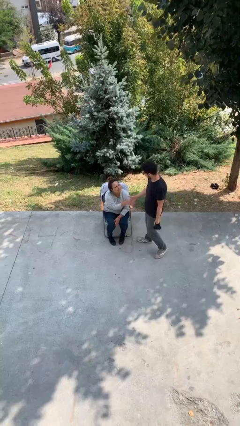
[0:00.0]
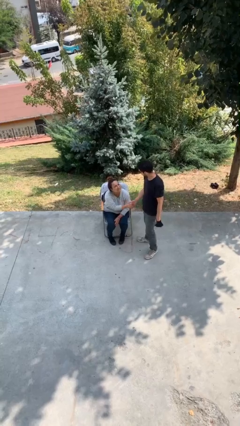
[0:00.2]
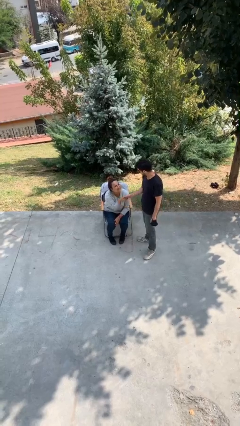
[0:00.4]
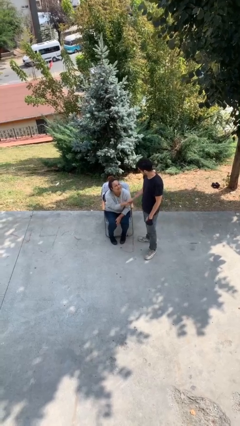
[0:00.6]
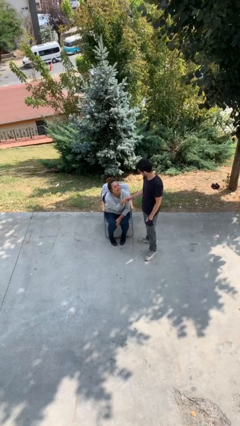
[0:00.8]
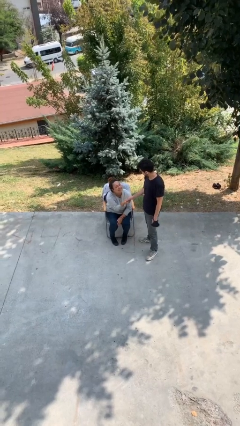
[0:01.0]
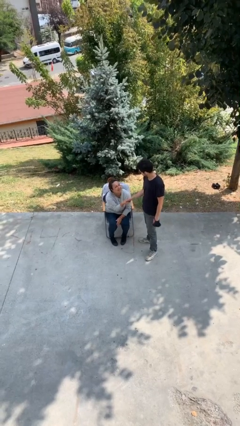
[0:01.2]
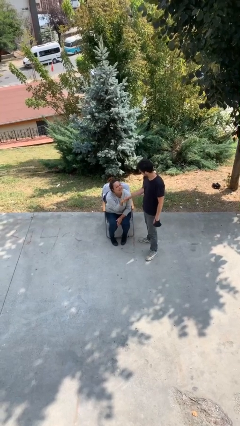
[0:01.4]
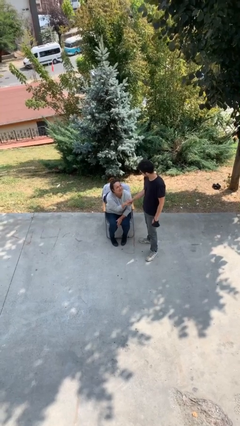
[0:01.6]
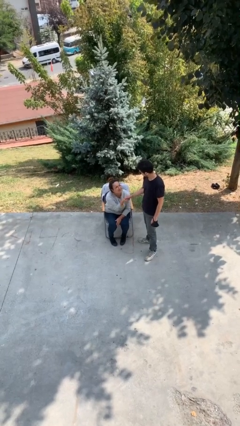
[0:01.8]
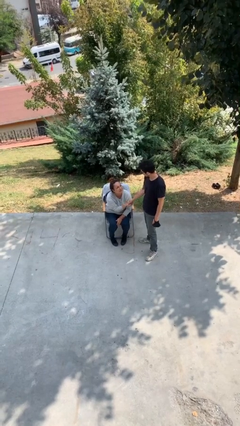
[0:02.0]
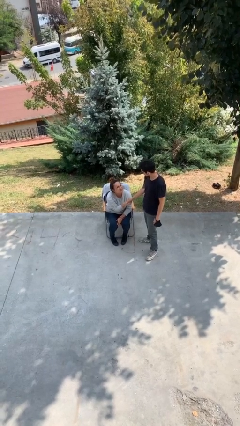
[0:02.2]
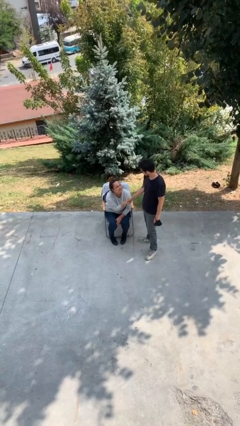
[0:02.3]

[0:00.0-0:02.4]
person shakes hand

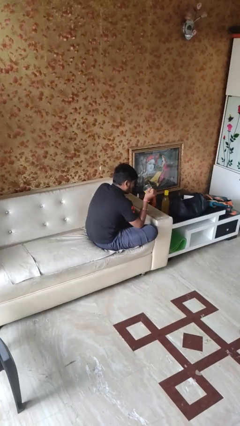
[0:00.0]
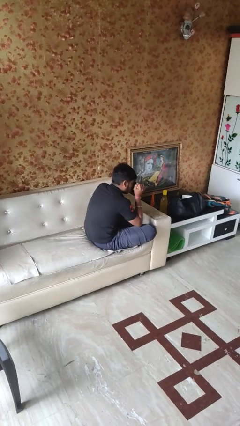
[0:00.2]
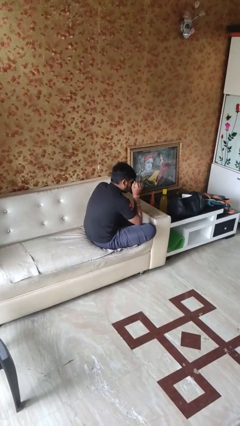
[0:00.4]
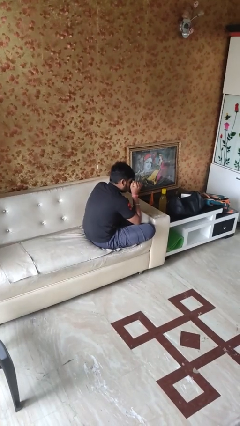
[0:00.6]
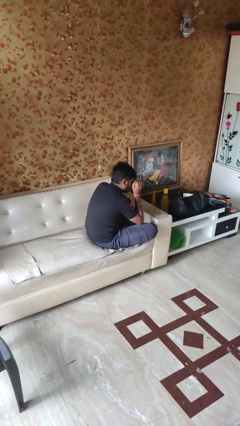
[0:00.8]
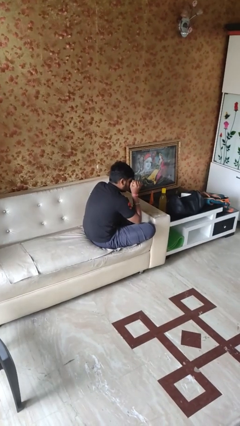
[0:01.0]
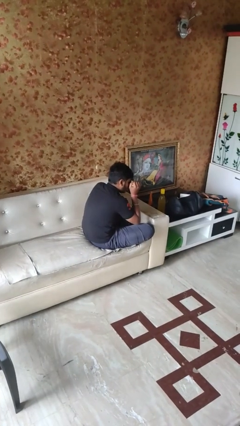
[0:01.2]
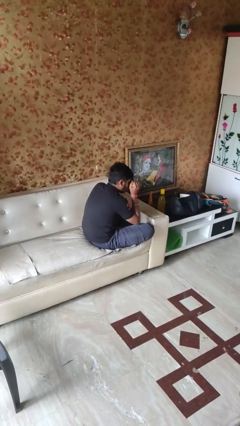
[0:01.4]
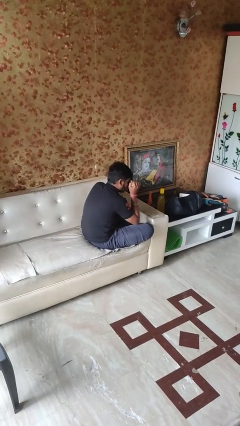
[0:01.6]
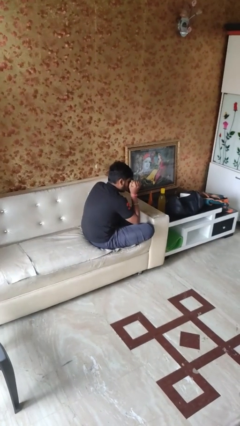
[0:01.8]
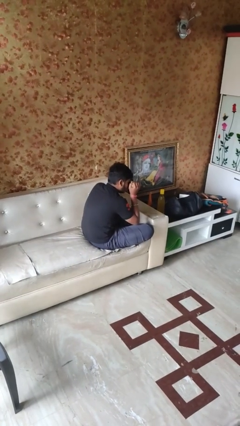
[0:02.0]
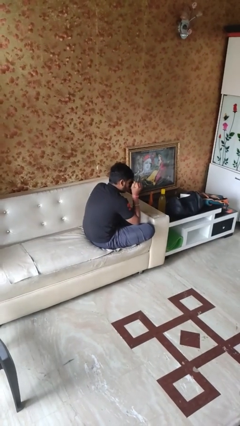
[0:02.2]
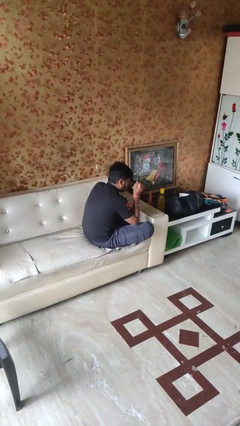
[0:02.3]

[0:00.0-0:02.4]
person drinks from mug

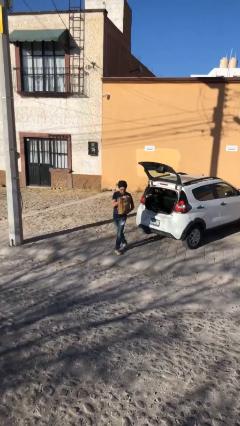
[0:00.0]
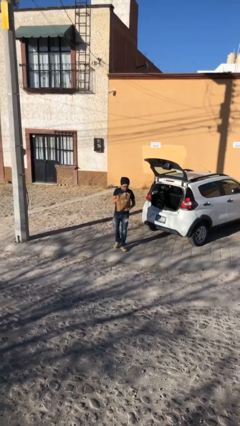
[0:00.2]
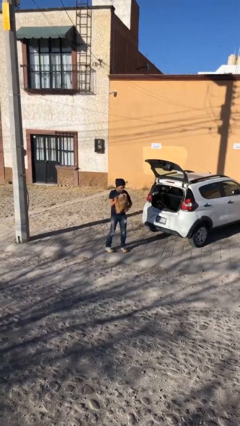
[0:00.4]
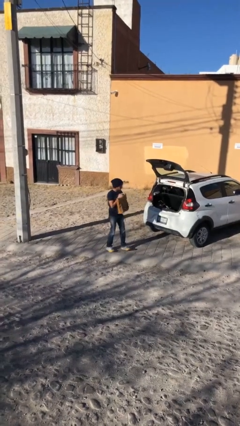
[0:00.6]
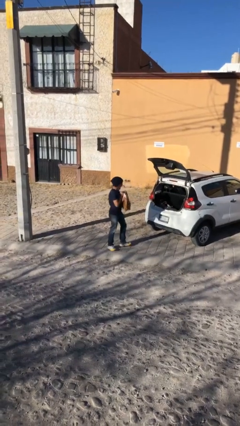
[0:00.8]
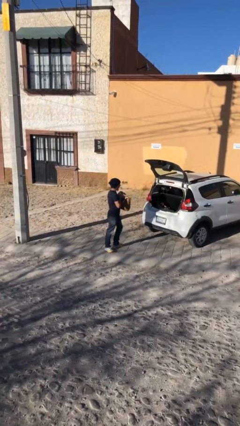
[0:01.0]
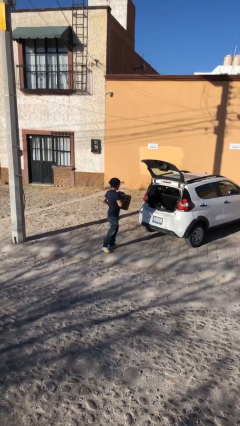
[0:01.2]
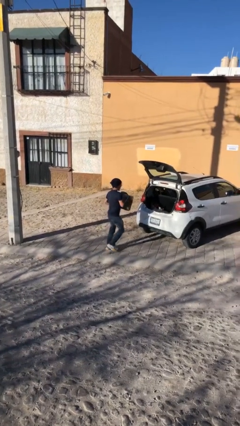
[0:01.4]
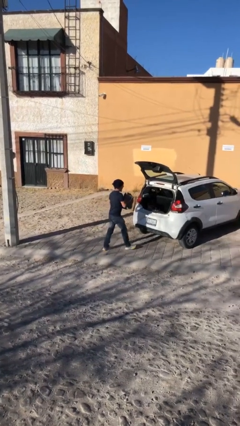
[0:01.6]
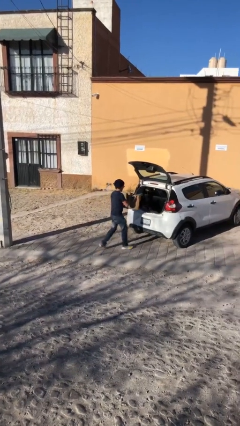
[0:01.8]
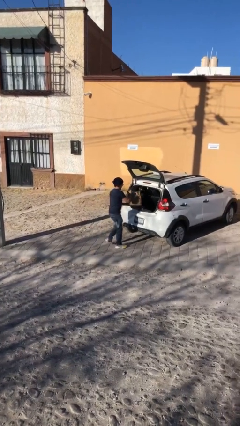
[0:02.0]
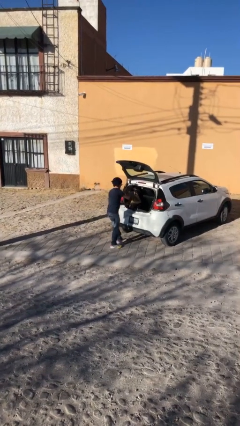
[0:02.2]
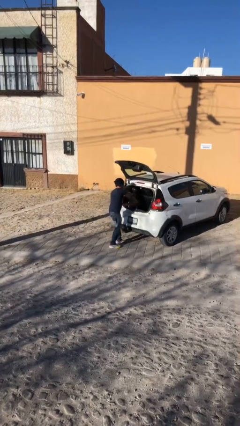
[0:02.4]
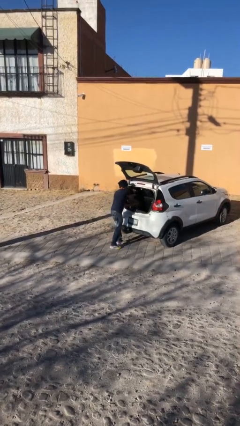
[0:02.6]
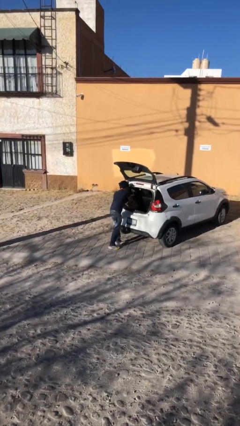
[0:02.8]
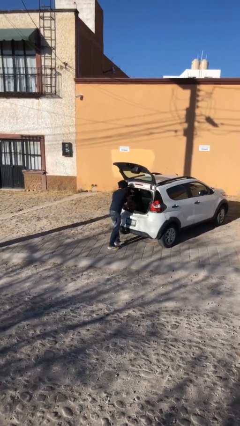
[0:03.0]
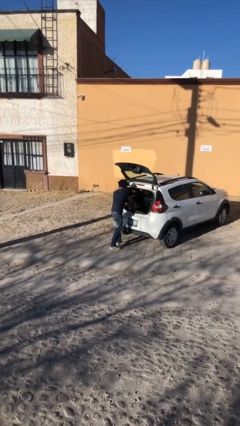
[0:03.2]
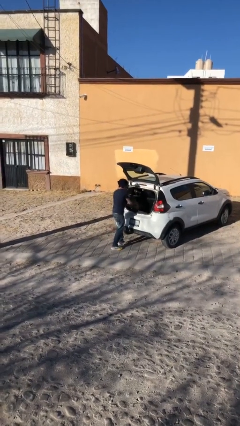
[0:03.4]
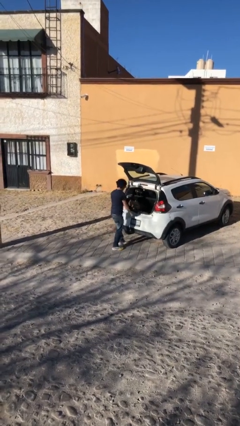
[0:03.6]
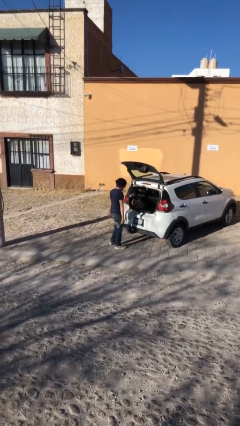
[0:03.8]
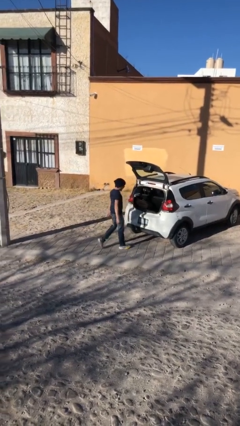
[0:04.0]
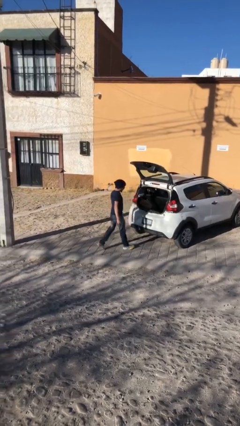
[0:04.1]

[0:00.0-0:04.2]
person loads car

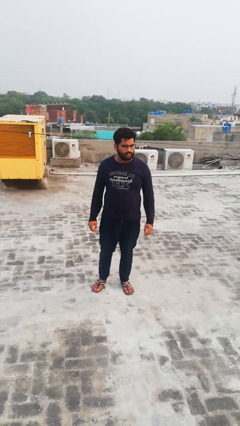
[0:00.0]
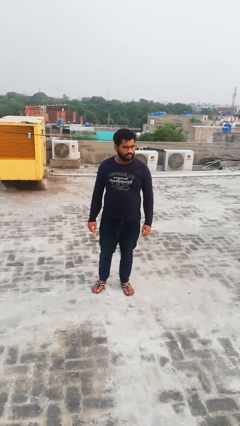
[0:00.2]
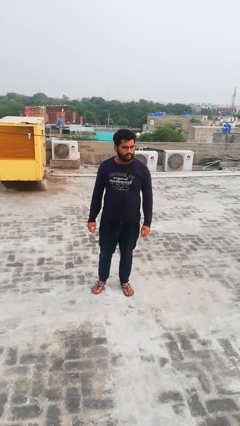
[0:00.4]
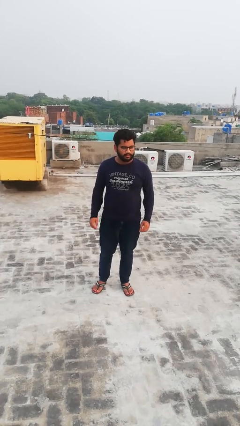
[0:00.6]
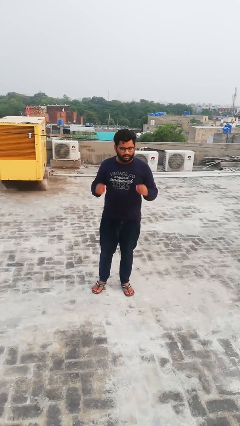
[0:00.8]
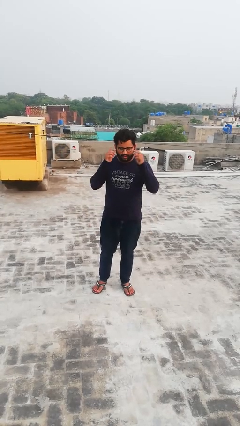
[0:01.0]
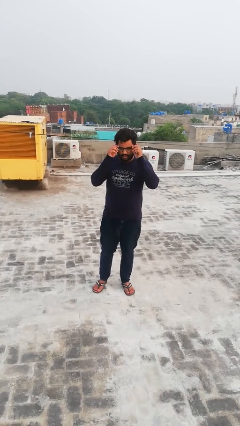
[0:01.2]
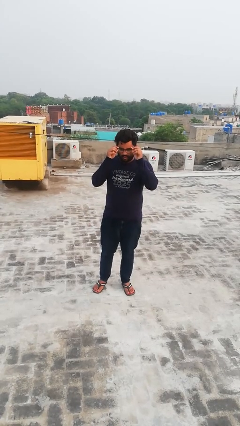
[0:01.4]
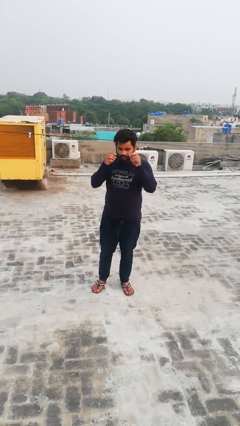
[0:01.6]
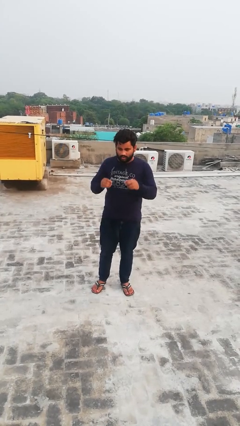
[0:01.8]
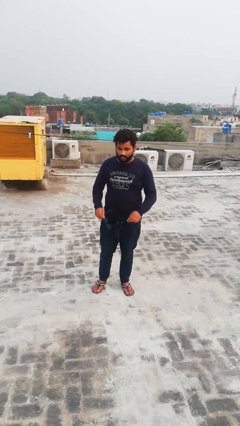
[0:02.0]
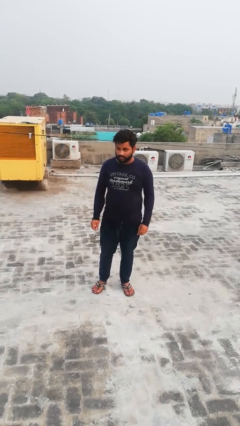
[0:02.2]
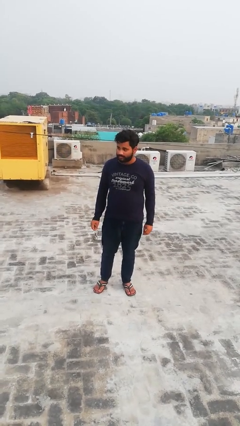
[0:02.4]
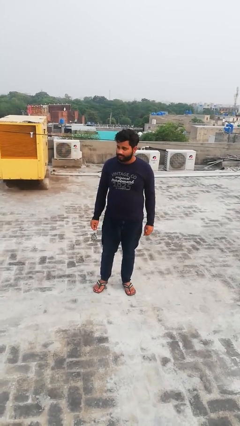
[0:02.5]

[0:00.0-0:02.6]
person takes off glasses

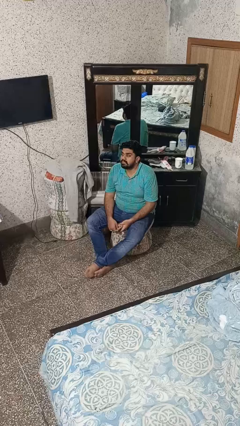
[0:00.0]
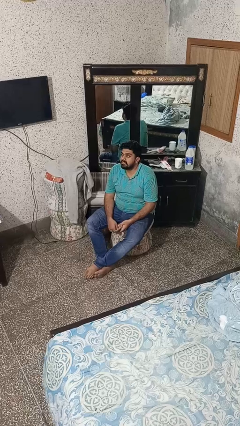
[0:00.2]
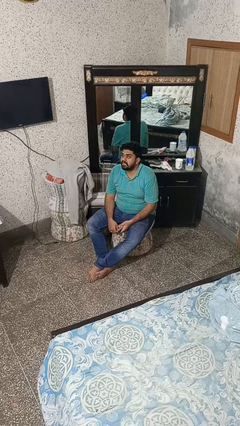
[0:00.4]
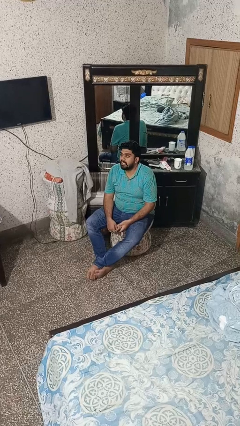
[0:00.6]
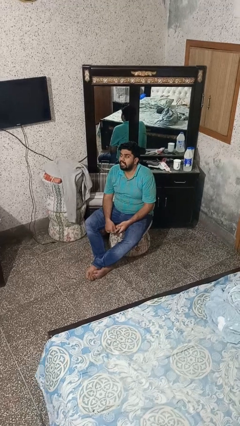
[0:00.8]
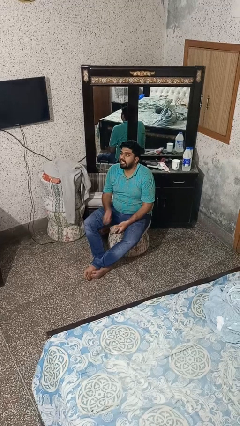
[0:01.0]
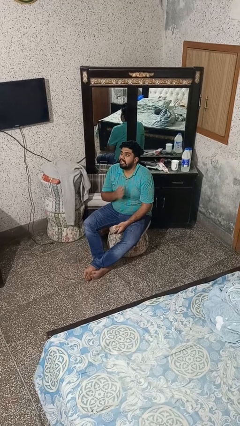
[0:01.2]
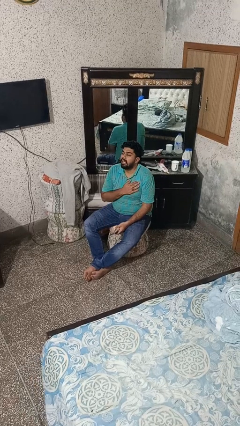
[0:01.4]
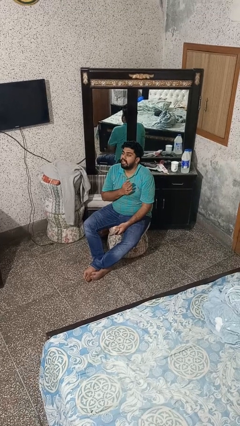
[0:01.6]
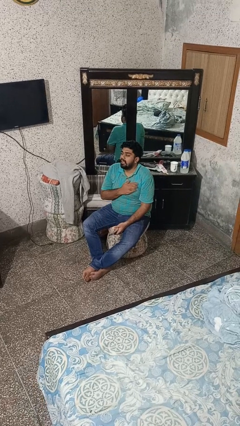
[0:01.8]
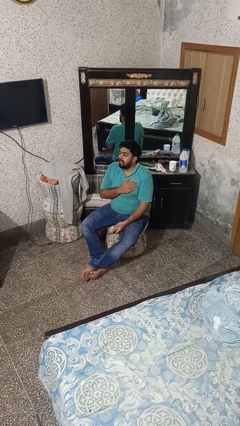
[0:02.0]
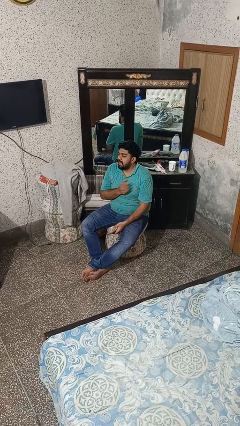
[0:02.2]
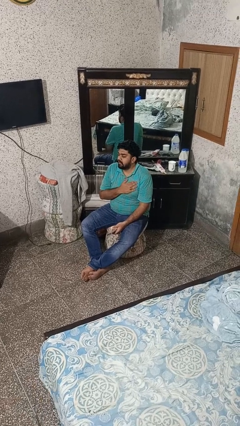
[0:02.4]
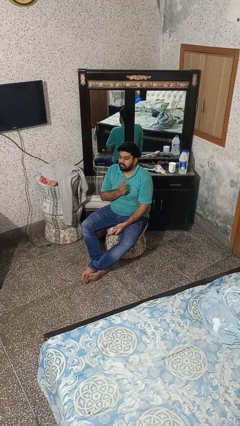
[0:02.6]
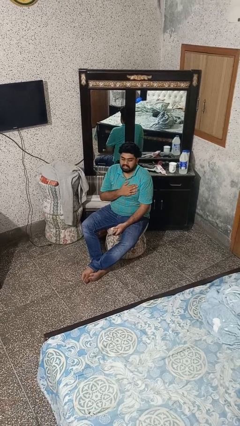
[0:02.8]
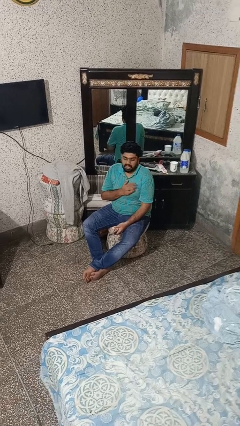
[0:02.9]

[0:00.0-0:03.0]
person drums on chest

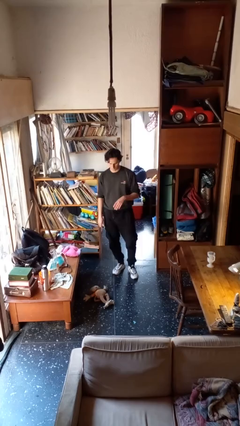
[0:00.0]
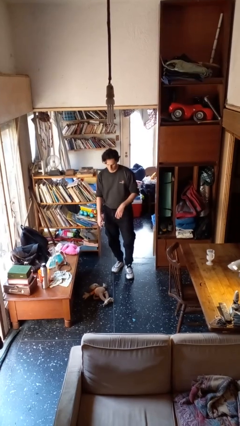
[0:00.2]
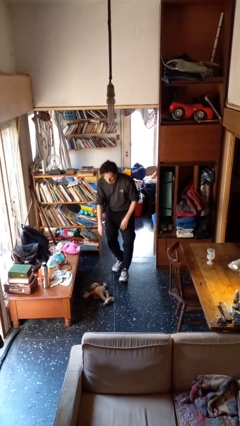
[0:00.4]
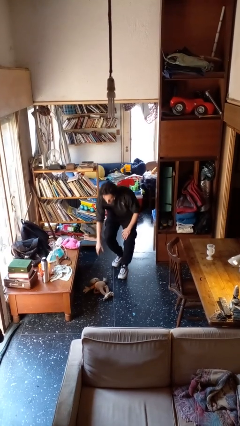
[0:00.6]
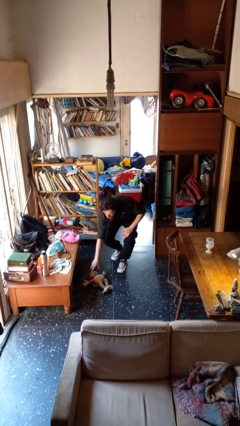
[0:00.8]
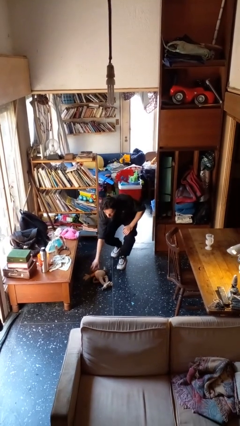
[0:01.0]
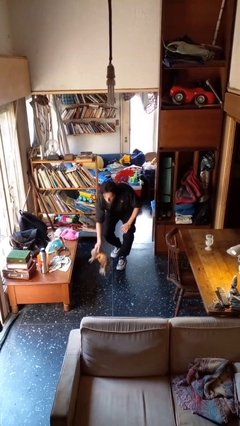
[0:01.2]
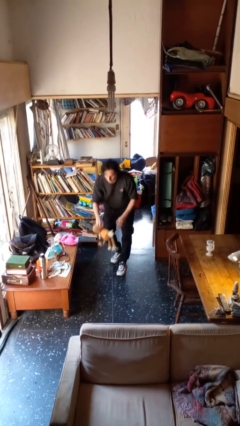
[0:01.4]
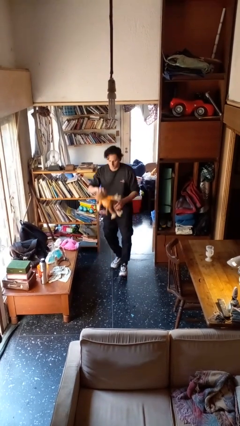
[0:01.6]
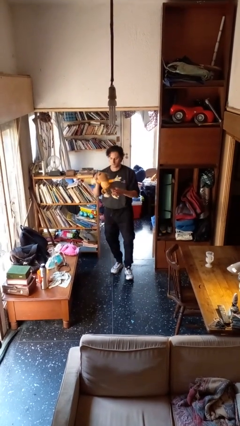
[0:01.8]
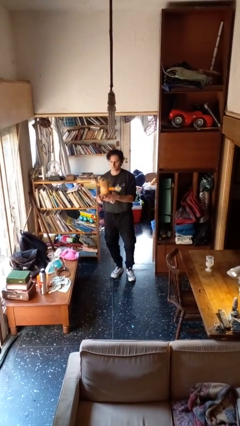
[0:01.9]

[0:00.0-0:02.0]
person picks up object from floor

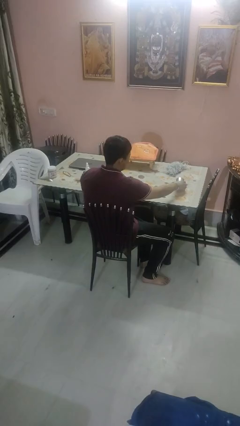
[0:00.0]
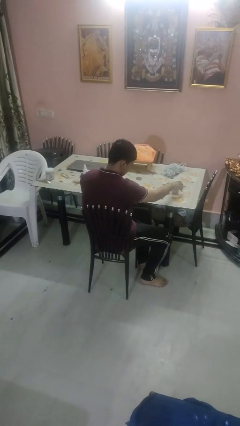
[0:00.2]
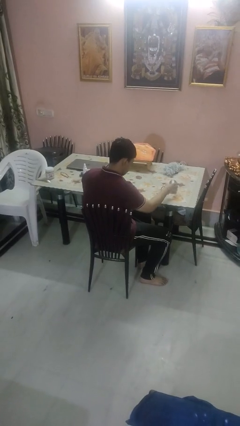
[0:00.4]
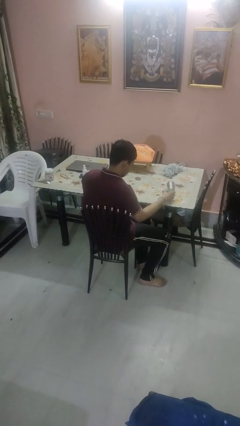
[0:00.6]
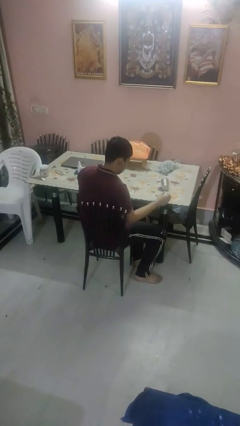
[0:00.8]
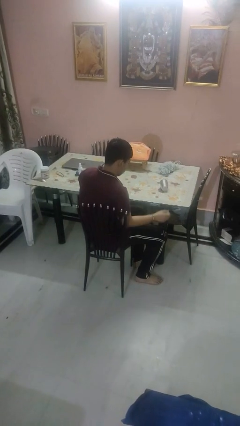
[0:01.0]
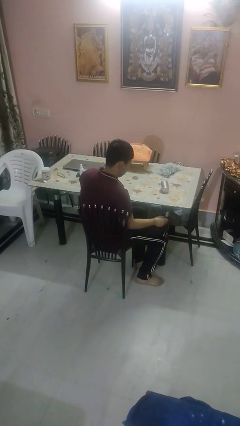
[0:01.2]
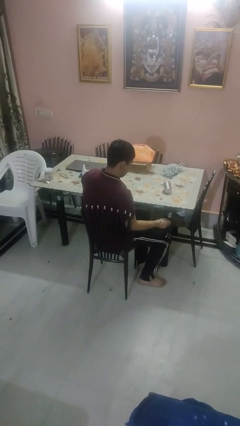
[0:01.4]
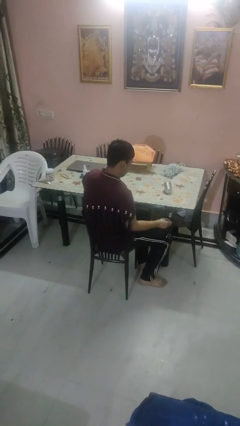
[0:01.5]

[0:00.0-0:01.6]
person spills on table
